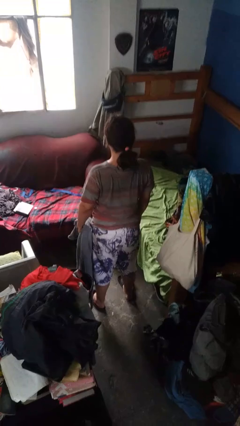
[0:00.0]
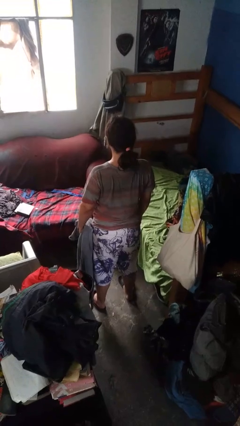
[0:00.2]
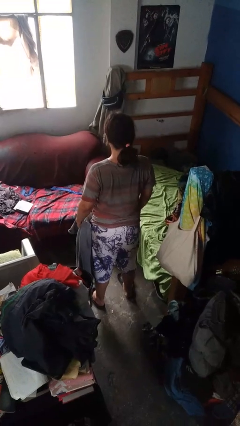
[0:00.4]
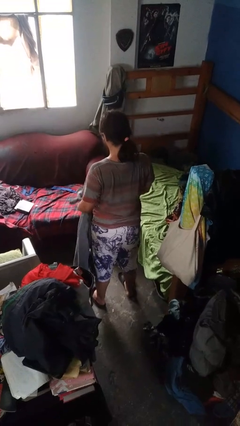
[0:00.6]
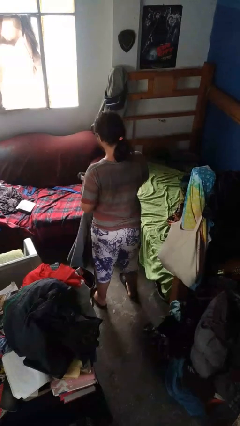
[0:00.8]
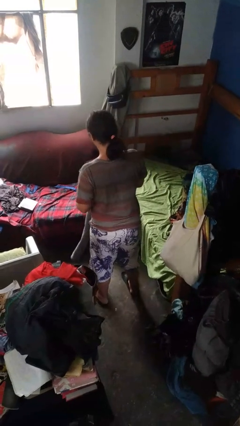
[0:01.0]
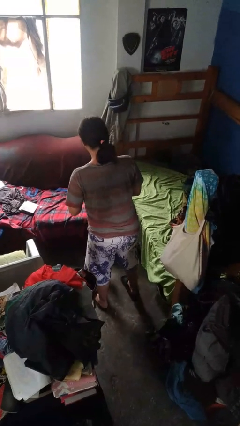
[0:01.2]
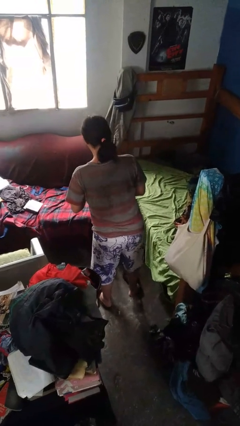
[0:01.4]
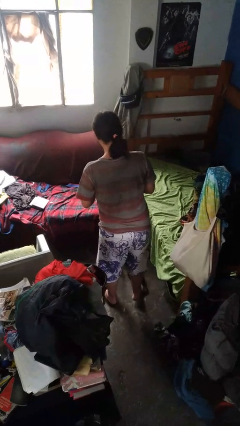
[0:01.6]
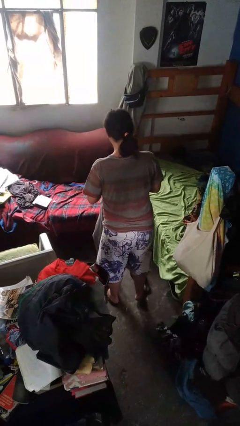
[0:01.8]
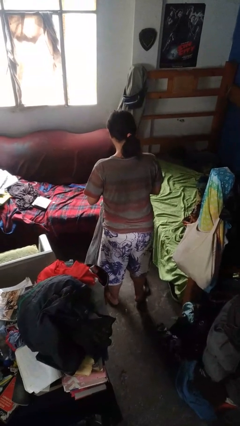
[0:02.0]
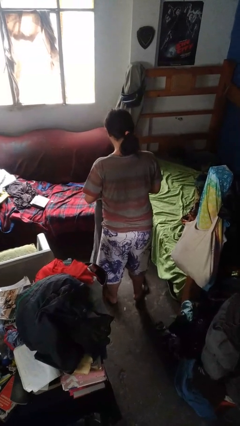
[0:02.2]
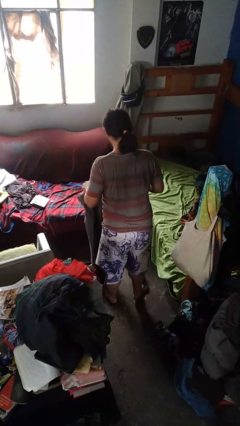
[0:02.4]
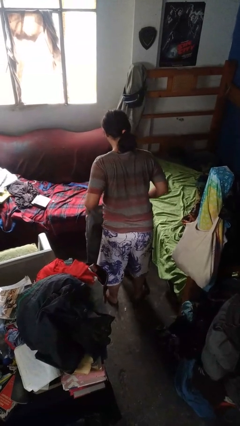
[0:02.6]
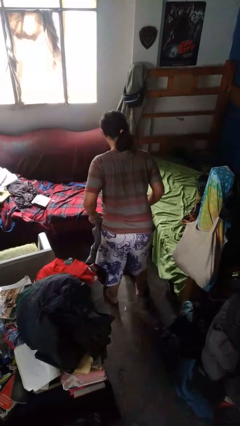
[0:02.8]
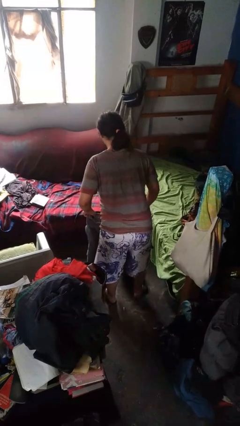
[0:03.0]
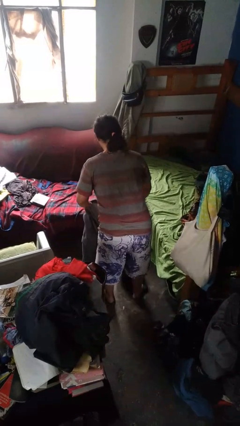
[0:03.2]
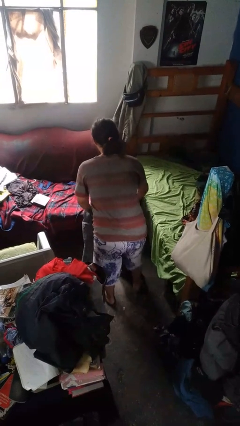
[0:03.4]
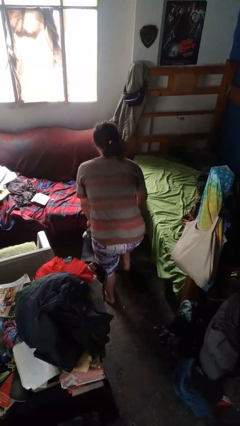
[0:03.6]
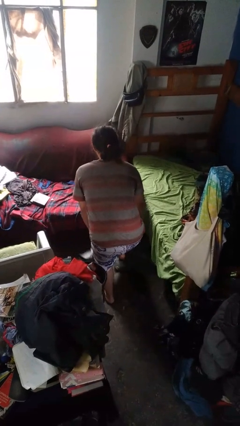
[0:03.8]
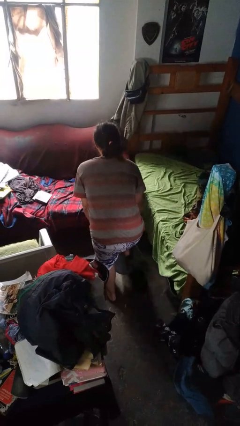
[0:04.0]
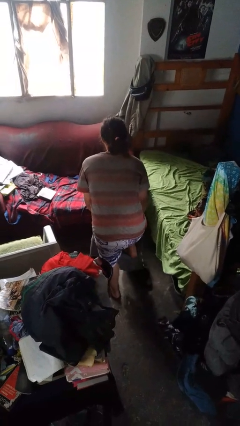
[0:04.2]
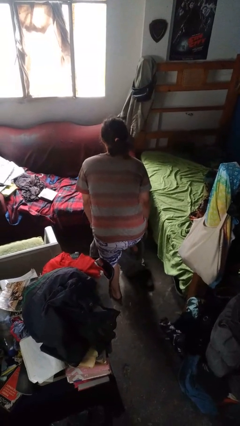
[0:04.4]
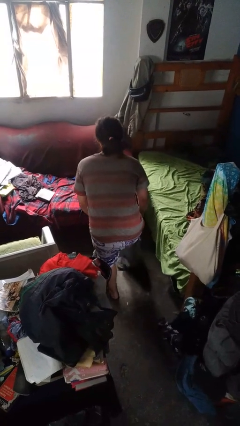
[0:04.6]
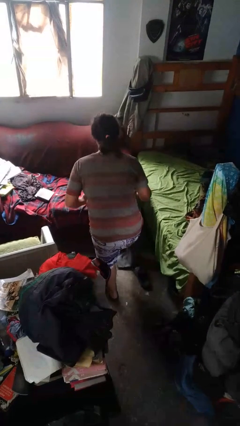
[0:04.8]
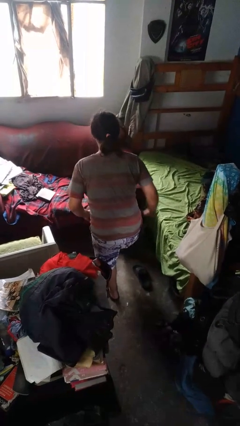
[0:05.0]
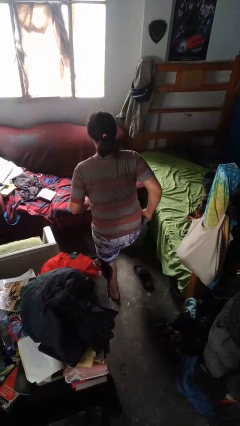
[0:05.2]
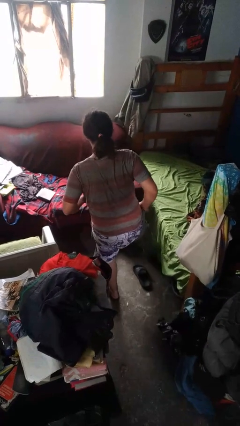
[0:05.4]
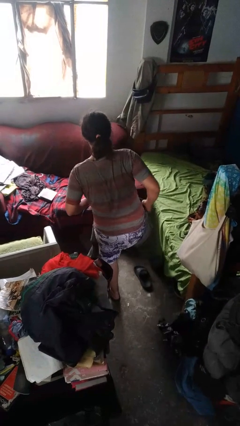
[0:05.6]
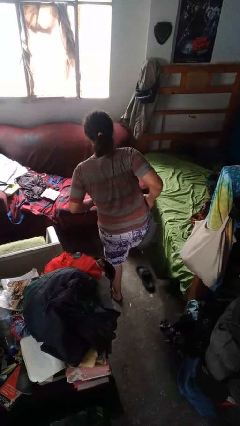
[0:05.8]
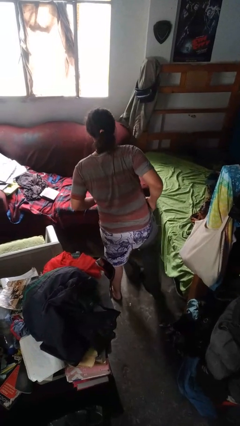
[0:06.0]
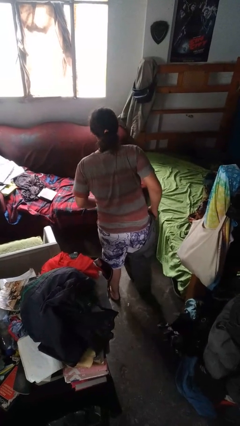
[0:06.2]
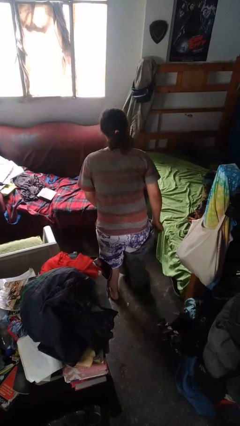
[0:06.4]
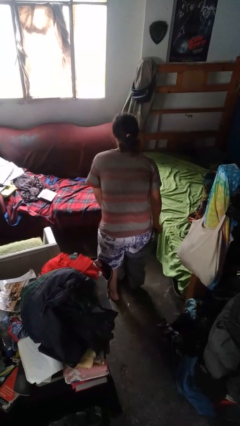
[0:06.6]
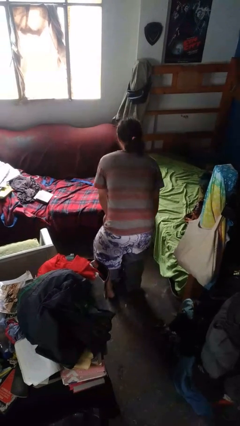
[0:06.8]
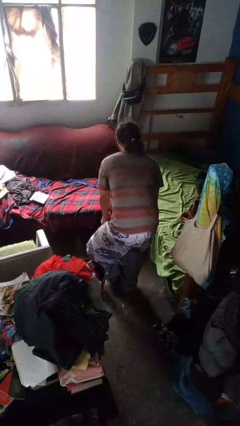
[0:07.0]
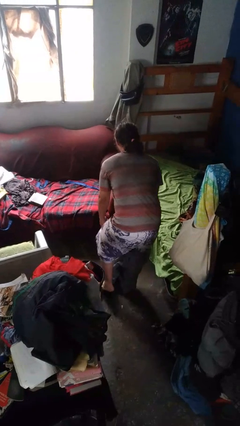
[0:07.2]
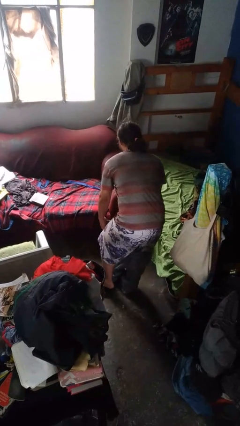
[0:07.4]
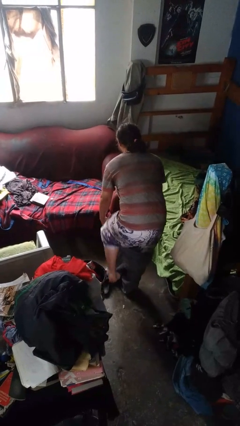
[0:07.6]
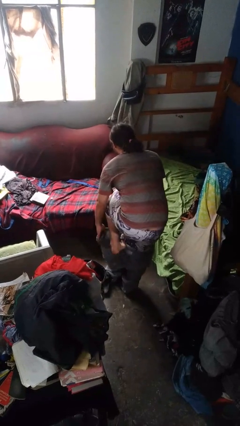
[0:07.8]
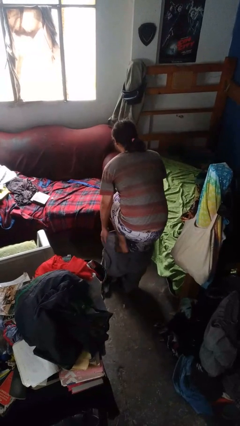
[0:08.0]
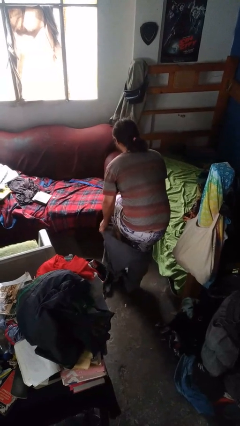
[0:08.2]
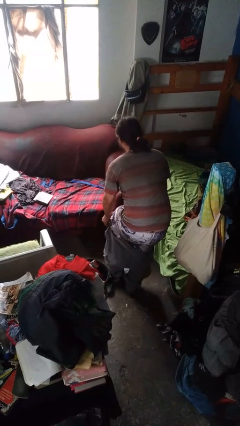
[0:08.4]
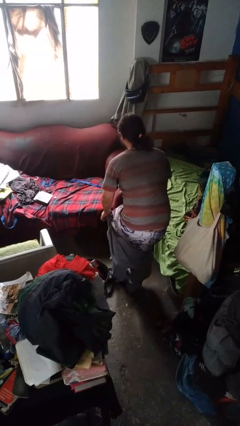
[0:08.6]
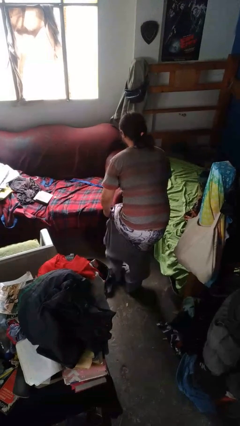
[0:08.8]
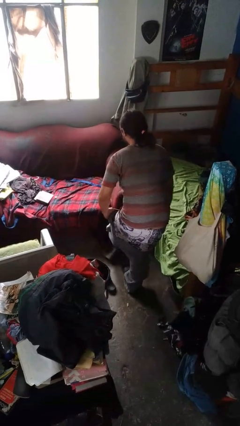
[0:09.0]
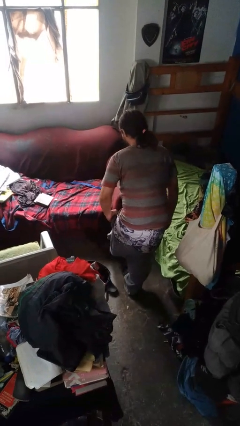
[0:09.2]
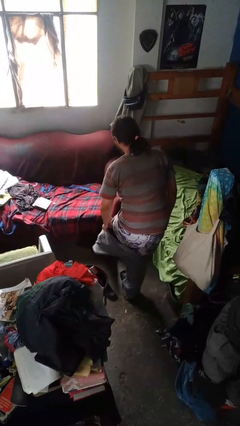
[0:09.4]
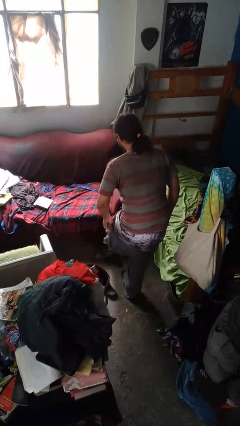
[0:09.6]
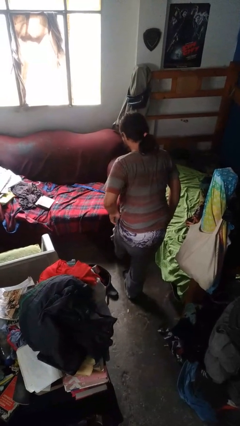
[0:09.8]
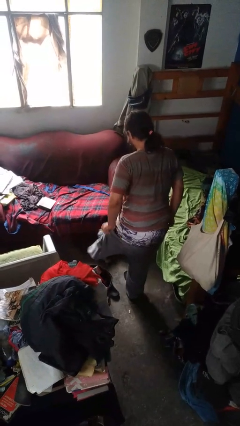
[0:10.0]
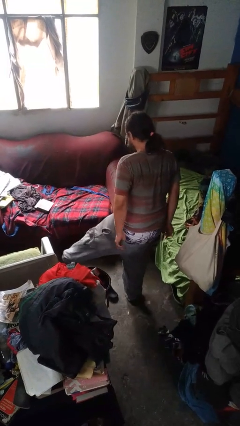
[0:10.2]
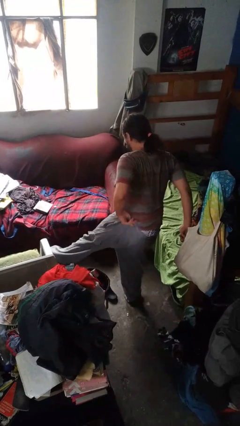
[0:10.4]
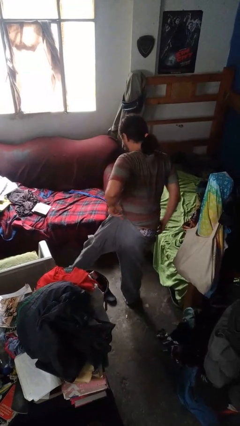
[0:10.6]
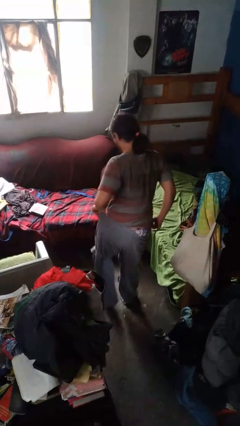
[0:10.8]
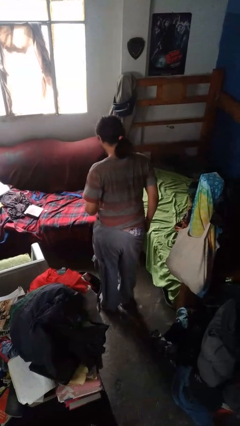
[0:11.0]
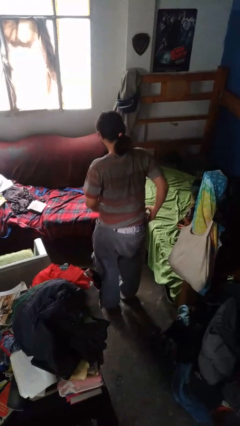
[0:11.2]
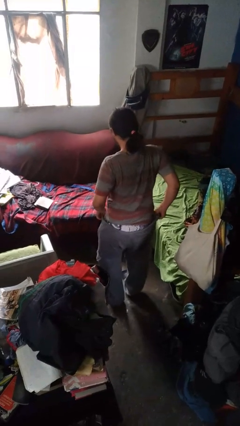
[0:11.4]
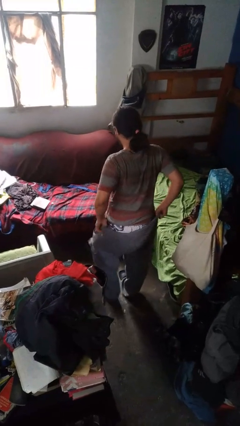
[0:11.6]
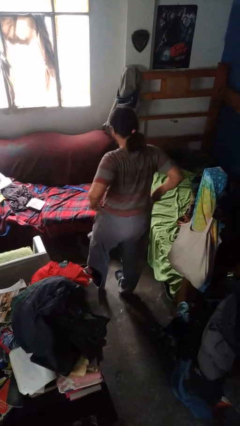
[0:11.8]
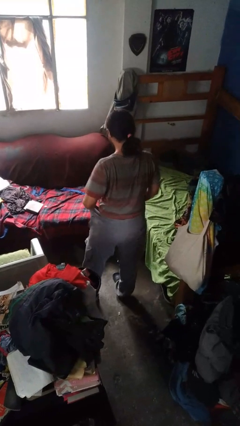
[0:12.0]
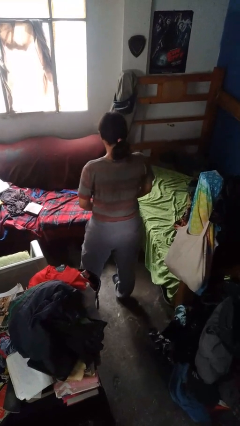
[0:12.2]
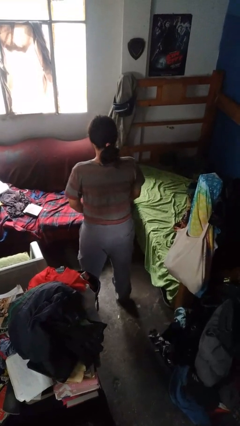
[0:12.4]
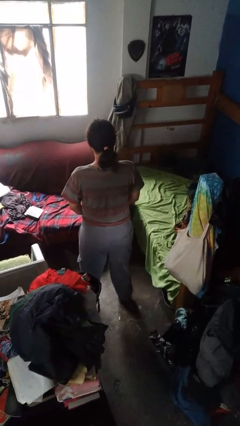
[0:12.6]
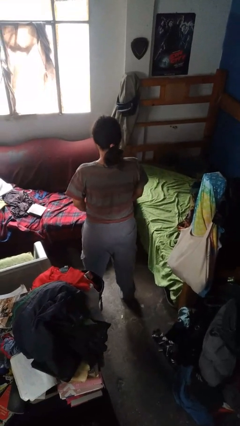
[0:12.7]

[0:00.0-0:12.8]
person puts on pants

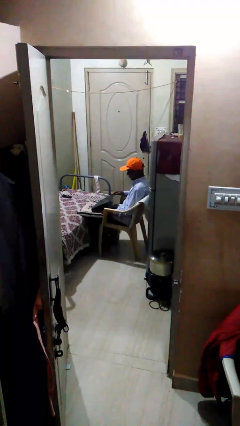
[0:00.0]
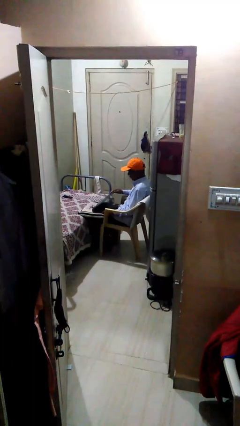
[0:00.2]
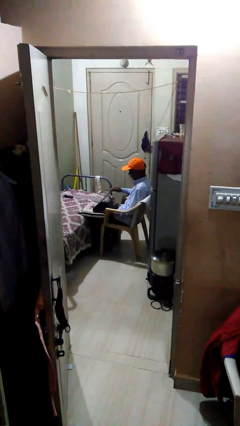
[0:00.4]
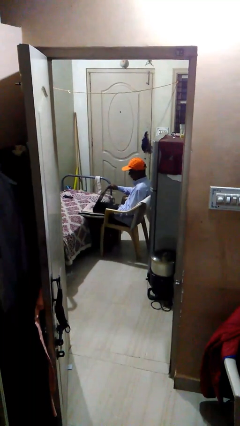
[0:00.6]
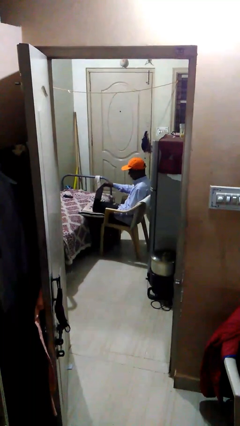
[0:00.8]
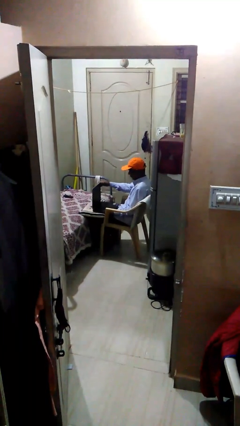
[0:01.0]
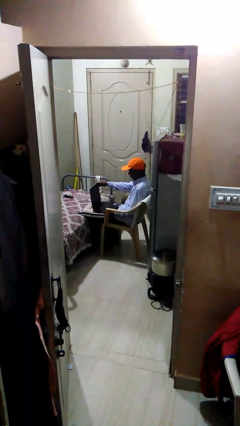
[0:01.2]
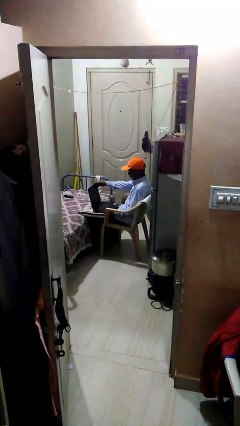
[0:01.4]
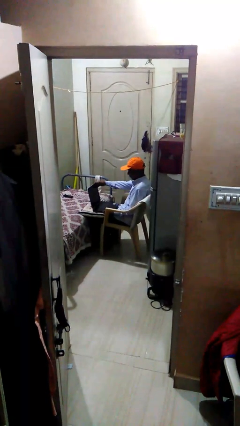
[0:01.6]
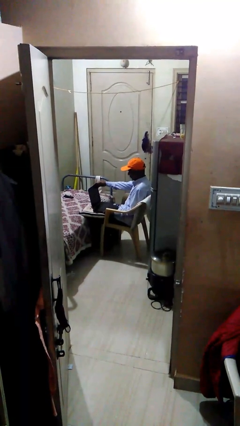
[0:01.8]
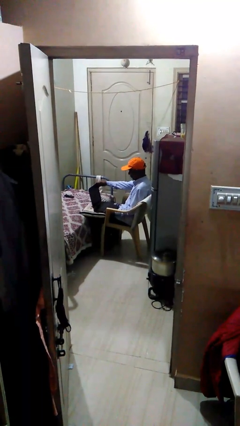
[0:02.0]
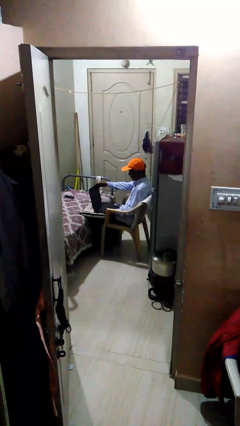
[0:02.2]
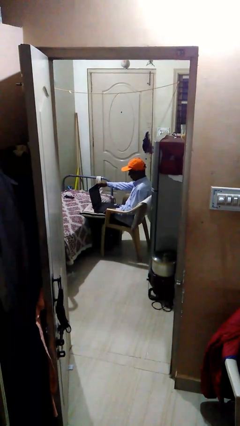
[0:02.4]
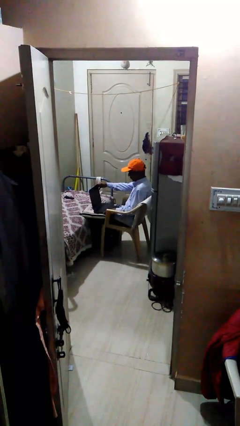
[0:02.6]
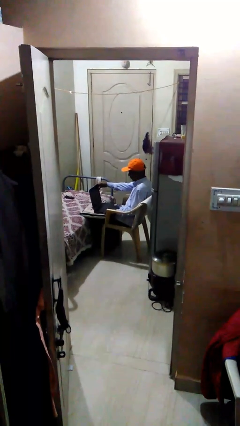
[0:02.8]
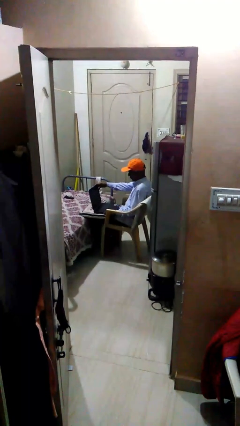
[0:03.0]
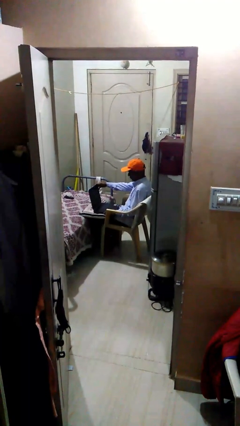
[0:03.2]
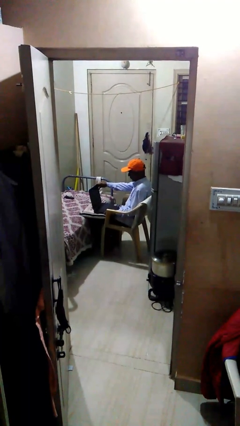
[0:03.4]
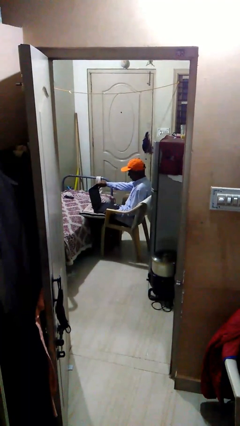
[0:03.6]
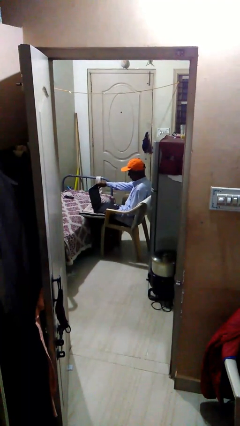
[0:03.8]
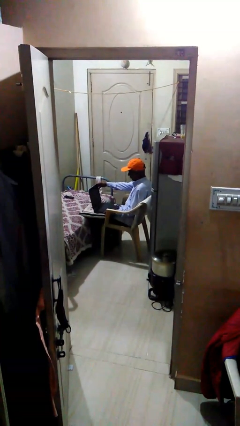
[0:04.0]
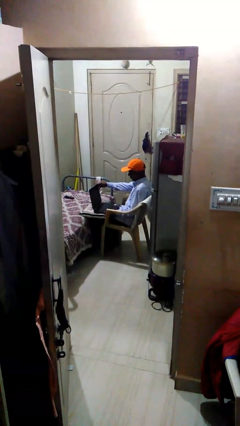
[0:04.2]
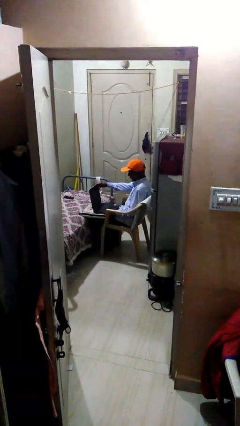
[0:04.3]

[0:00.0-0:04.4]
person interacts with laptop

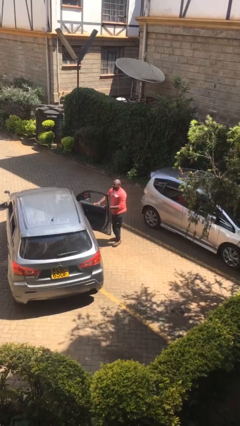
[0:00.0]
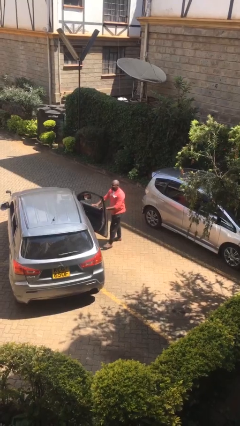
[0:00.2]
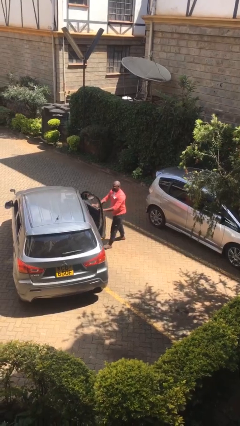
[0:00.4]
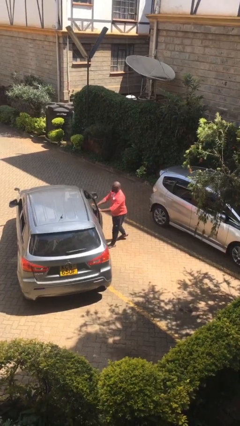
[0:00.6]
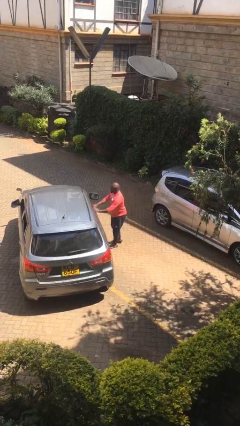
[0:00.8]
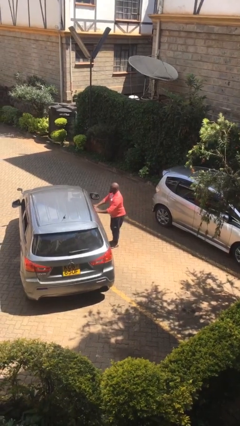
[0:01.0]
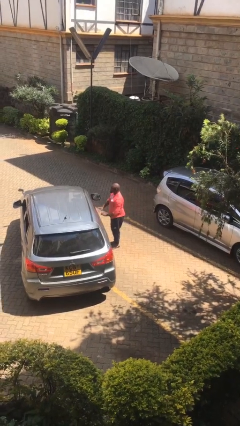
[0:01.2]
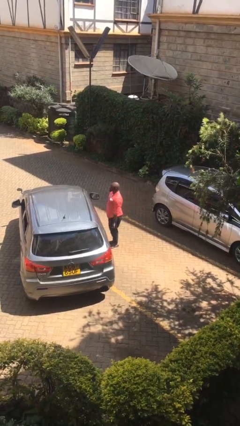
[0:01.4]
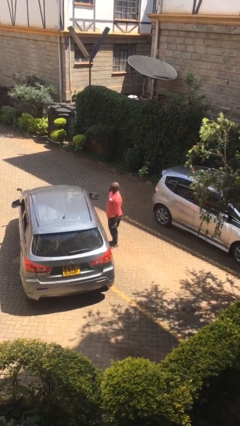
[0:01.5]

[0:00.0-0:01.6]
person closes car door
